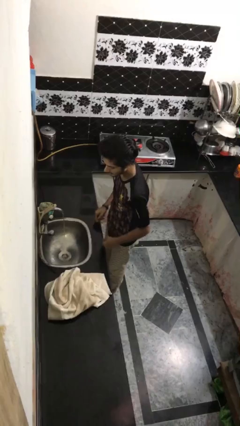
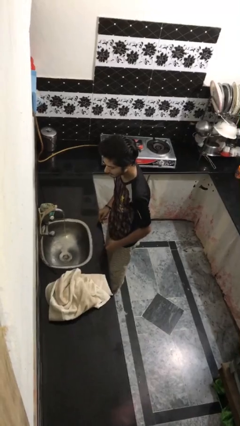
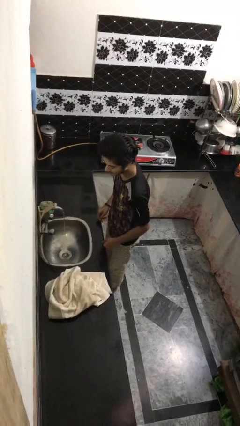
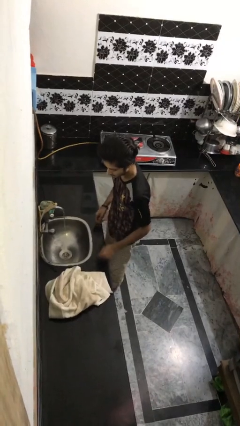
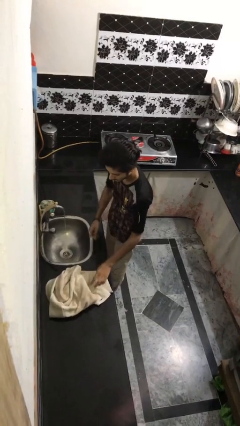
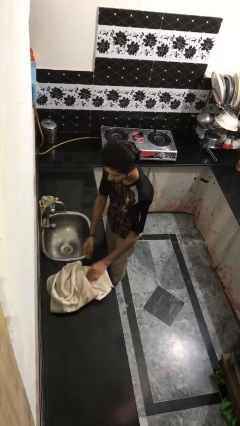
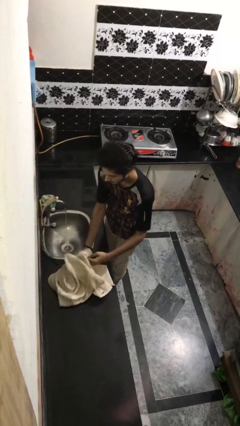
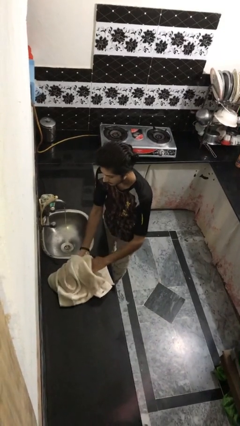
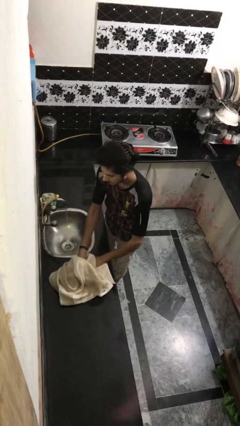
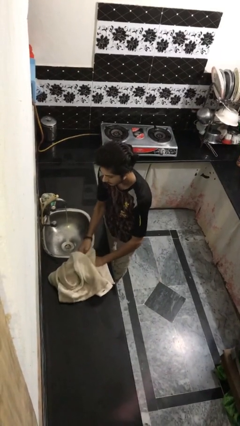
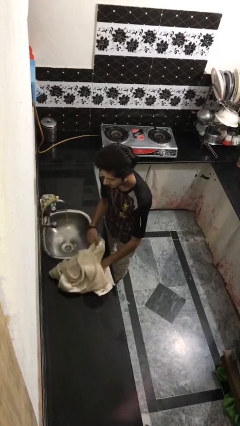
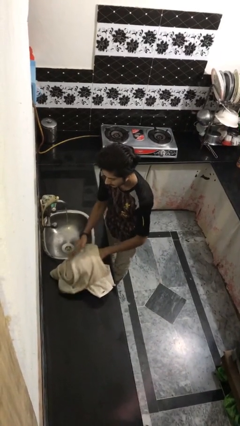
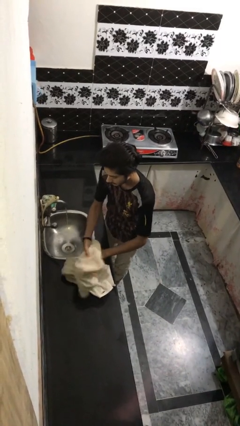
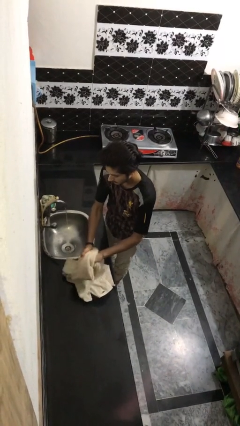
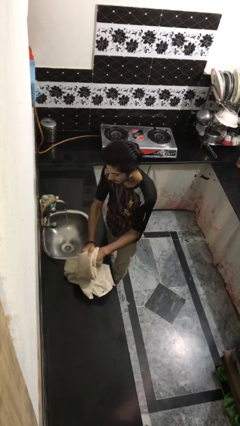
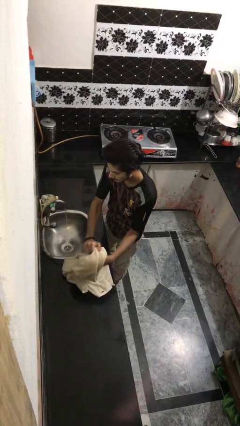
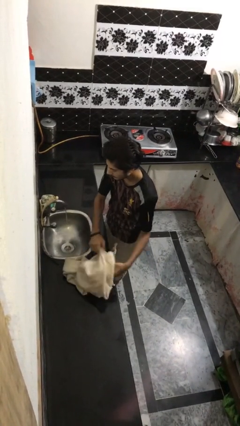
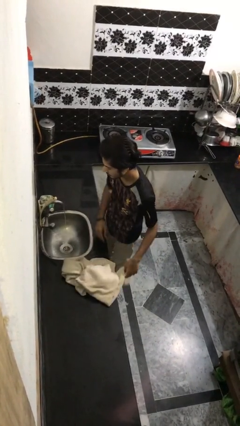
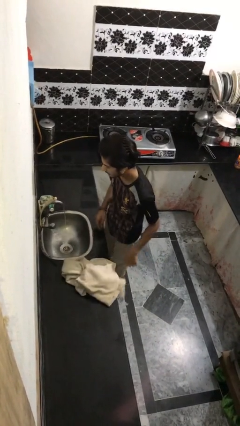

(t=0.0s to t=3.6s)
person dries face with towel

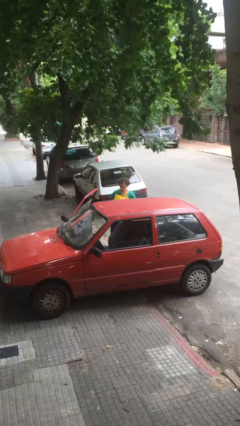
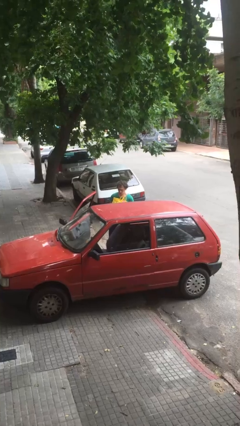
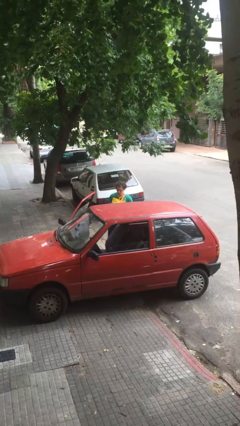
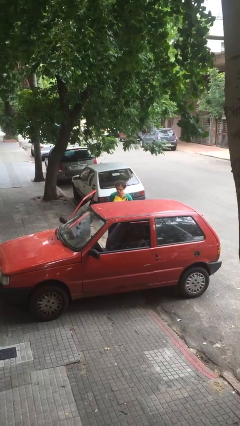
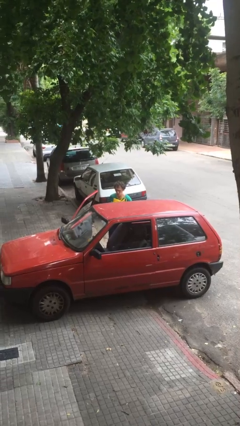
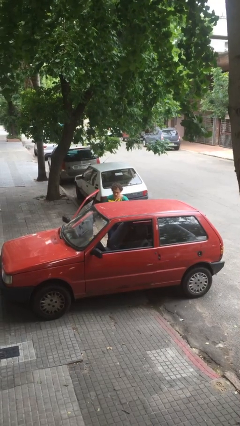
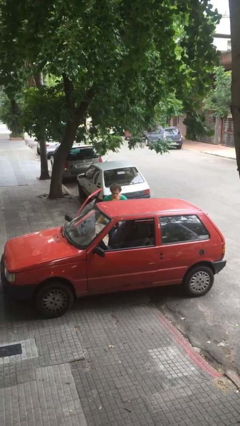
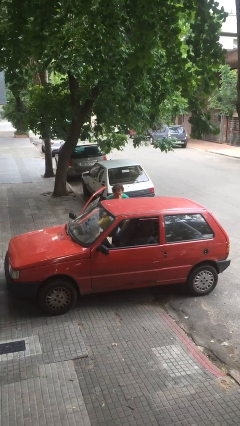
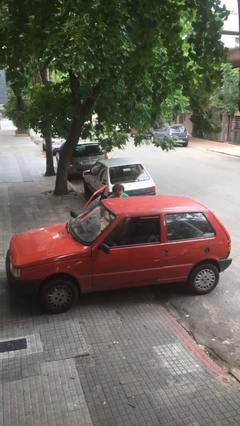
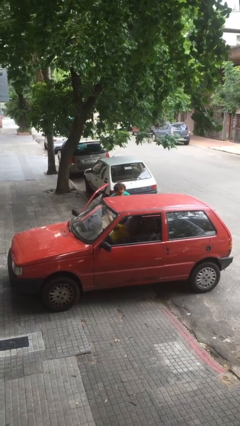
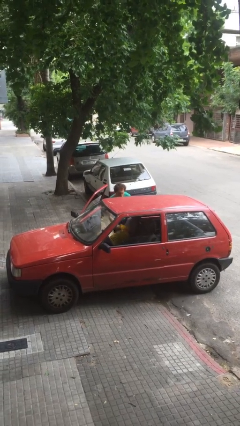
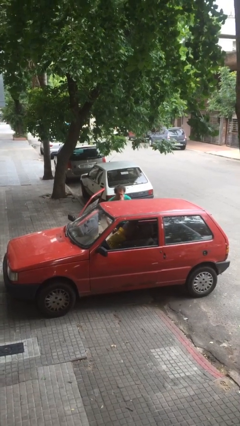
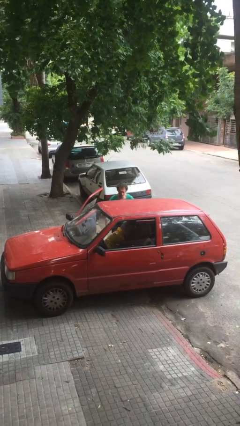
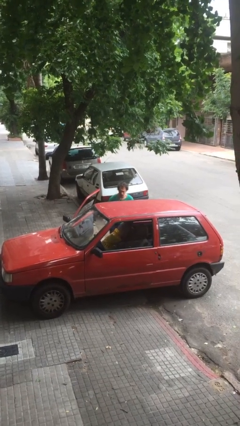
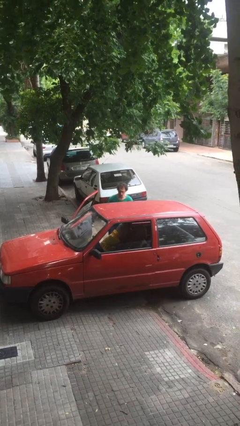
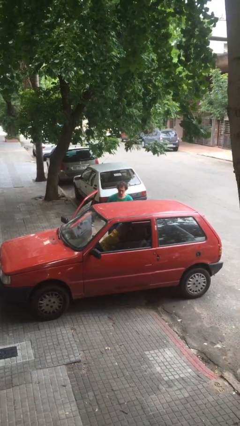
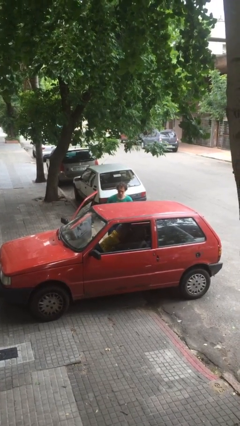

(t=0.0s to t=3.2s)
person loads car

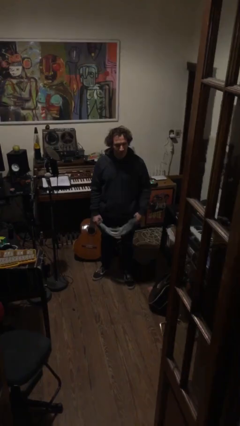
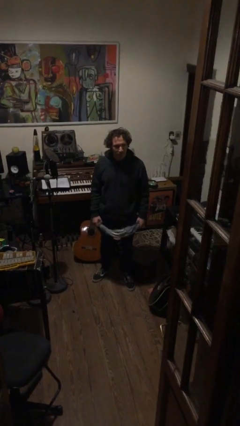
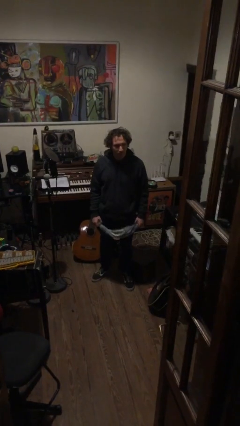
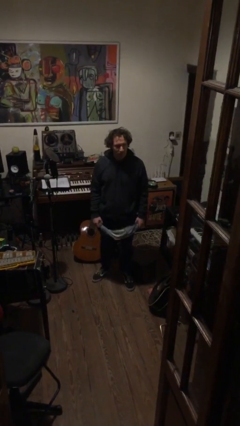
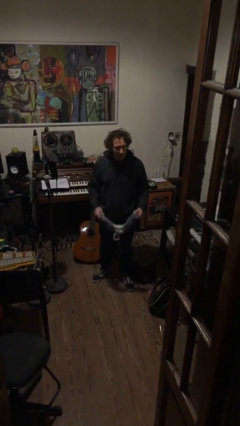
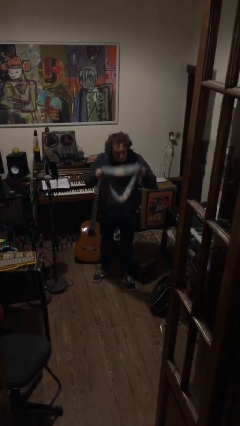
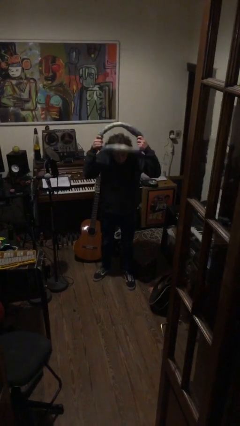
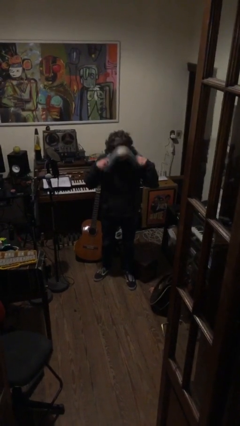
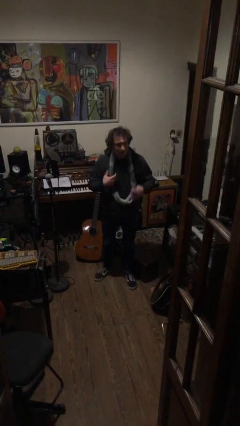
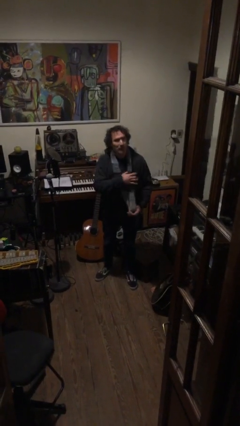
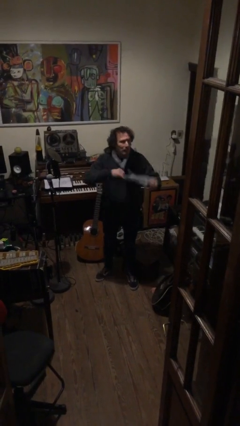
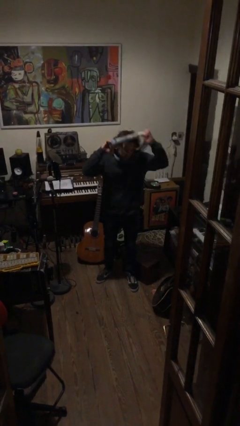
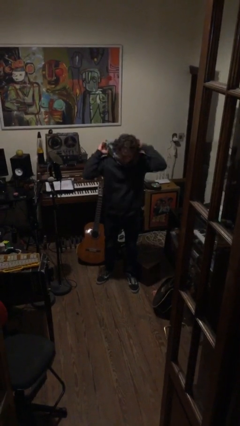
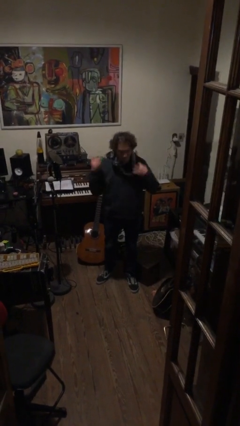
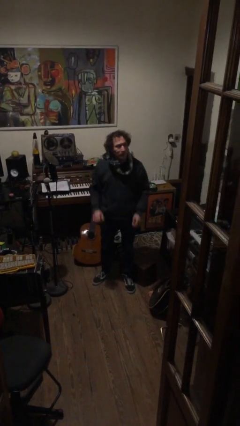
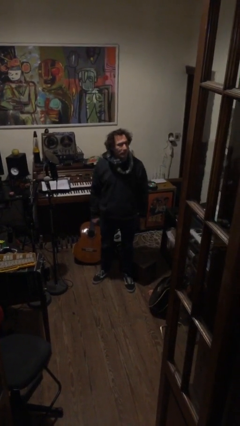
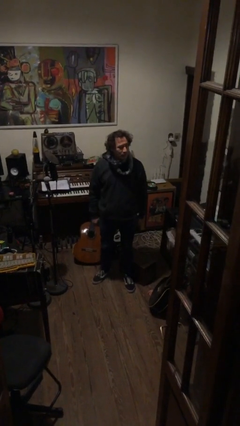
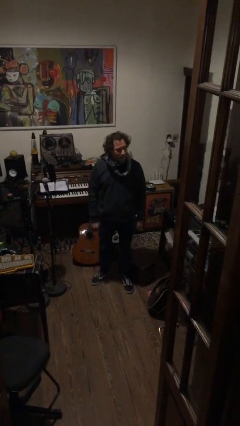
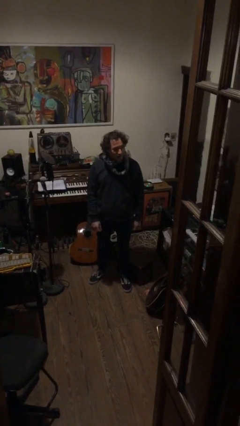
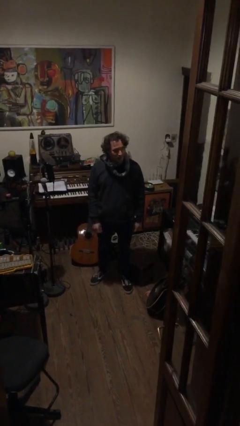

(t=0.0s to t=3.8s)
person puts on scarf

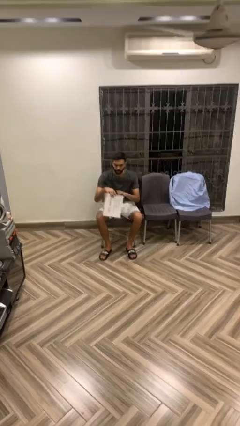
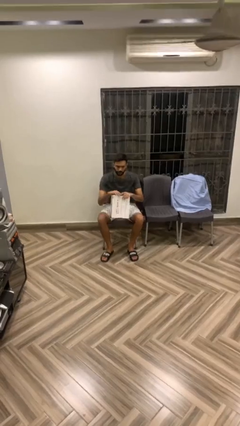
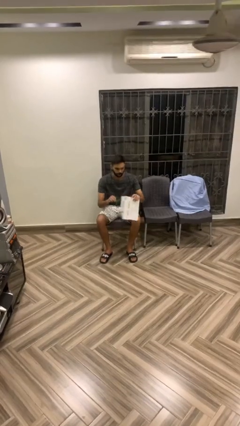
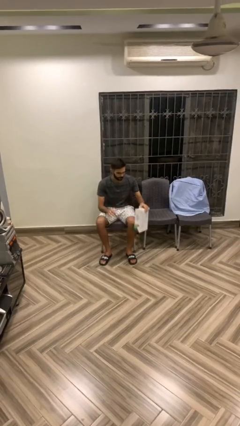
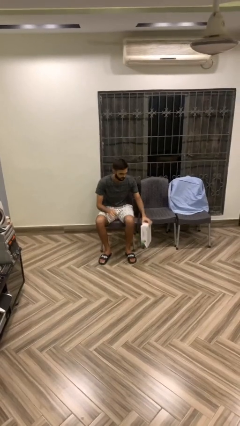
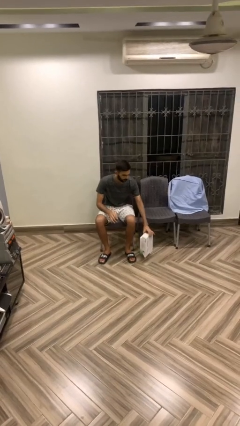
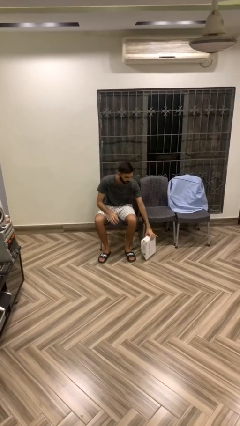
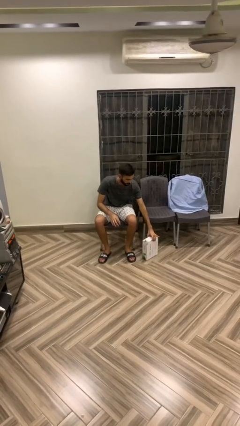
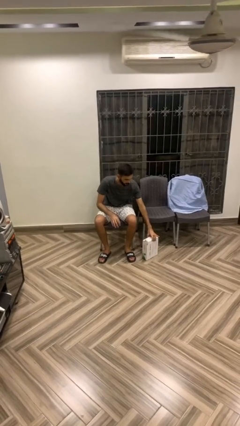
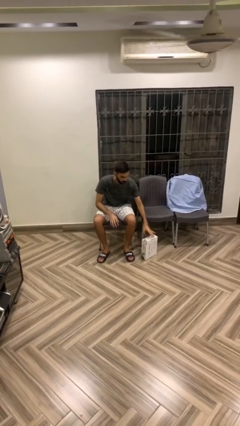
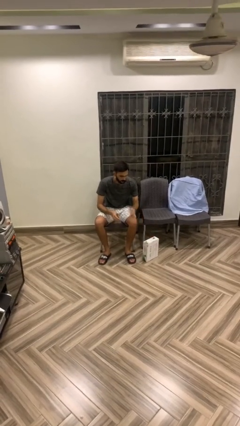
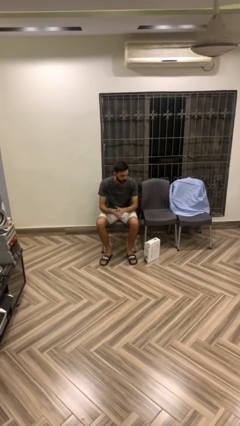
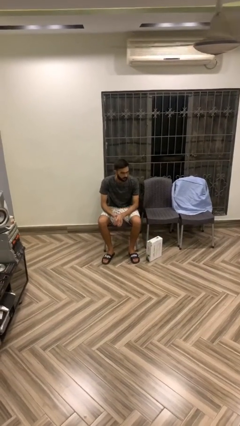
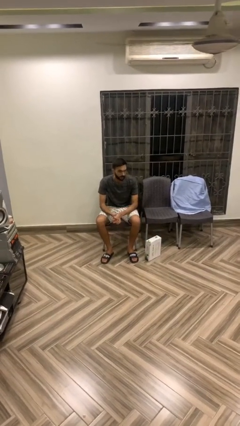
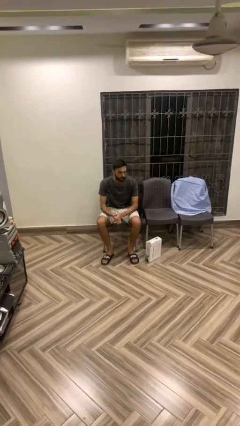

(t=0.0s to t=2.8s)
person puts down object on floor

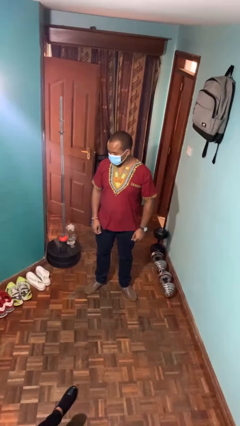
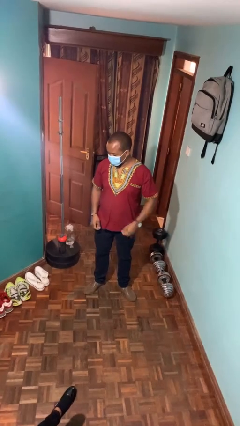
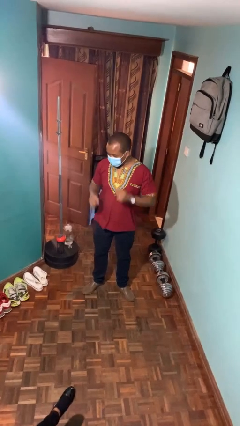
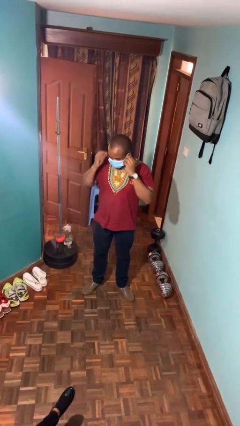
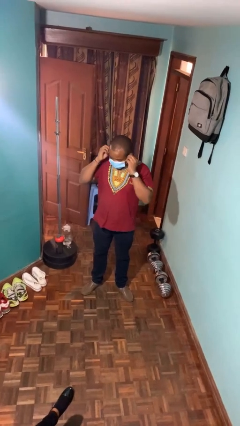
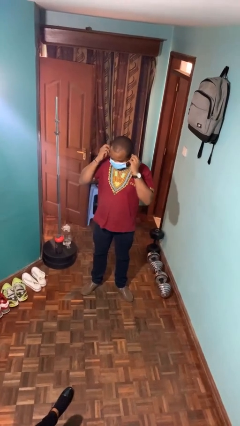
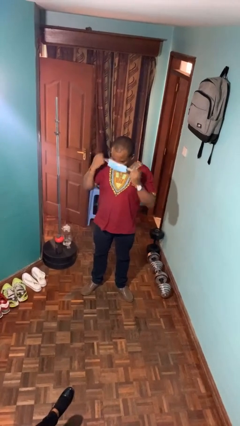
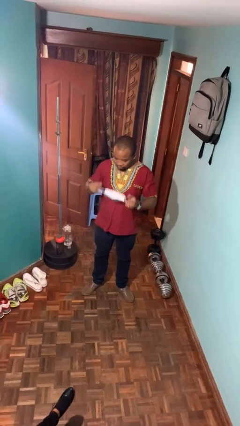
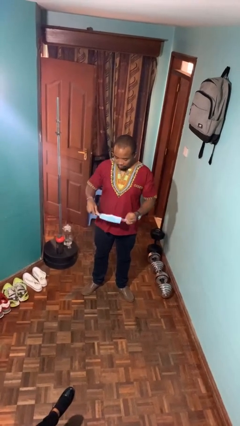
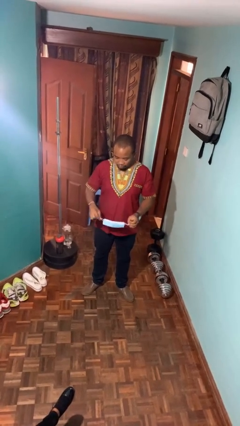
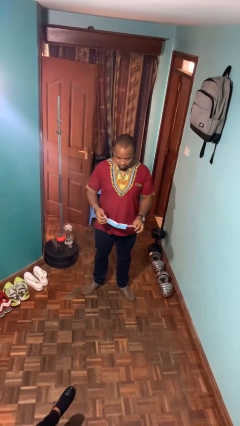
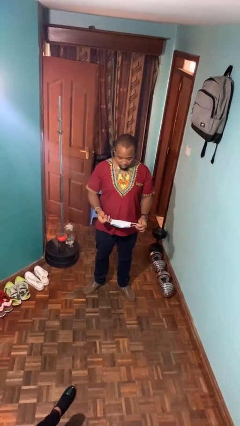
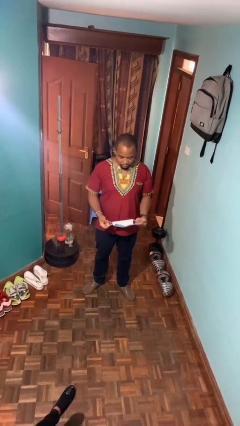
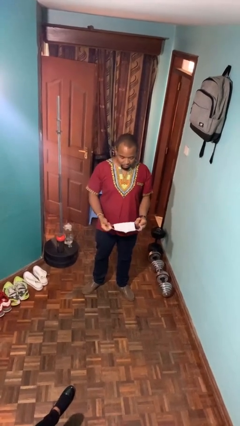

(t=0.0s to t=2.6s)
person takes off facemask

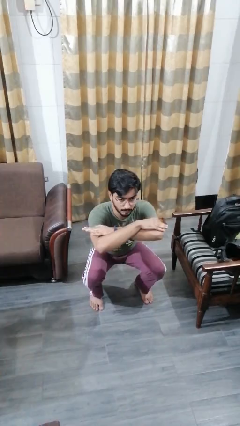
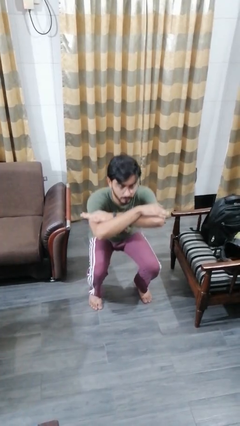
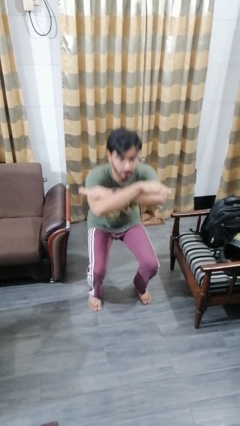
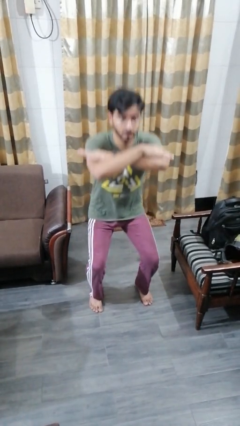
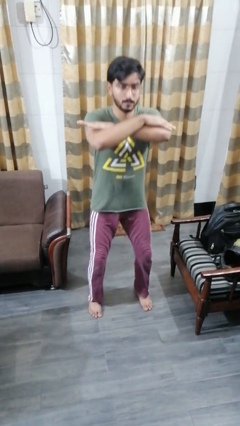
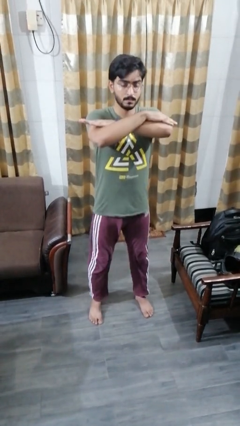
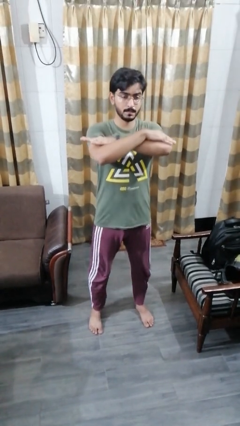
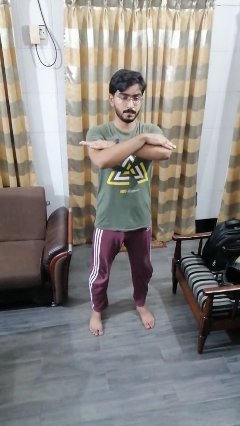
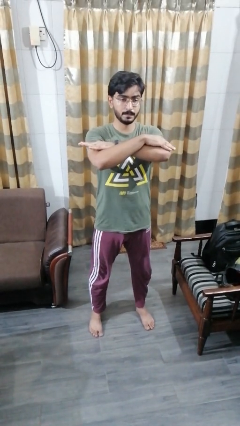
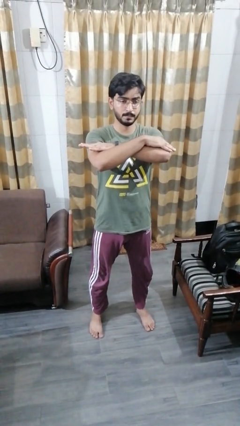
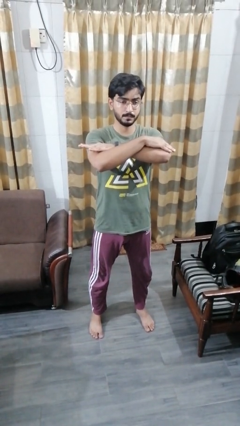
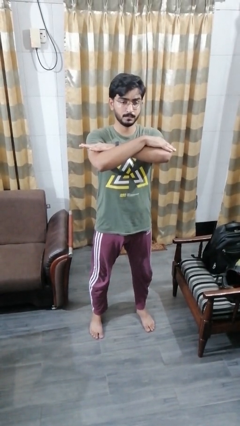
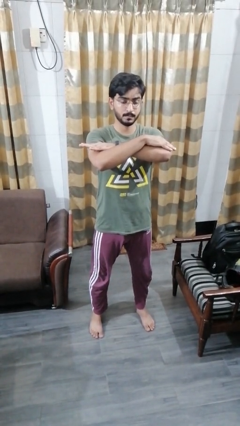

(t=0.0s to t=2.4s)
person stands up from floor
